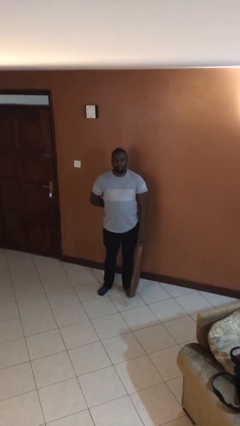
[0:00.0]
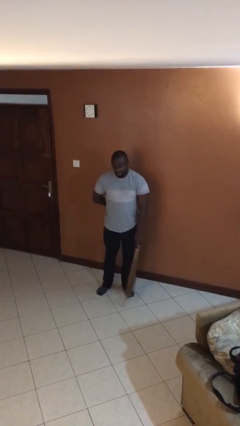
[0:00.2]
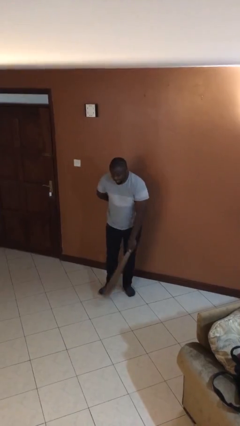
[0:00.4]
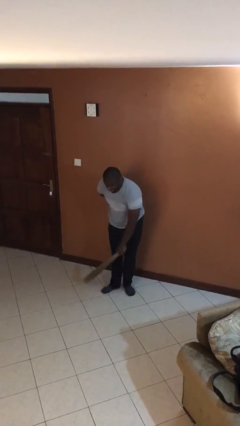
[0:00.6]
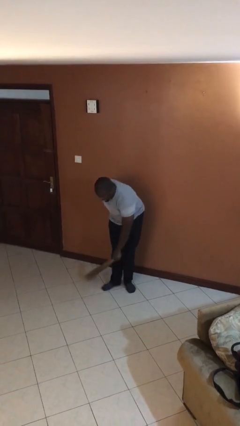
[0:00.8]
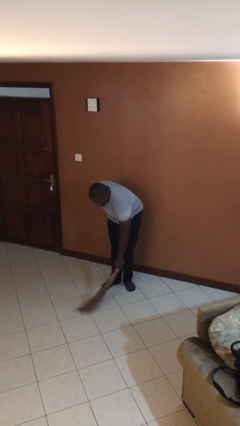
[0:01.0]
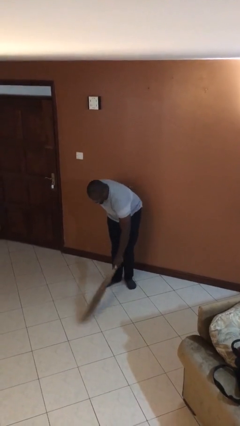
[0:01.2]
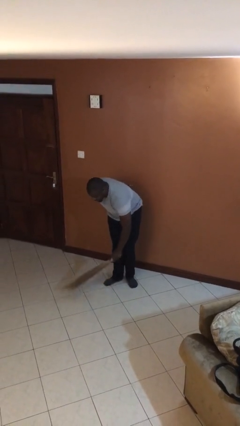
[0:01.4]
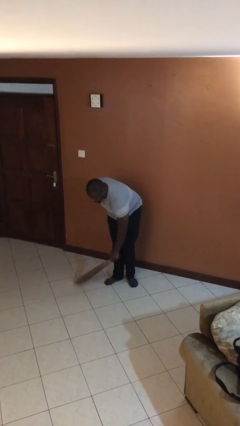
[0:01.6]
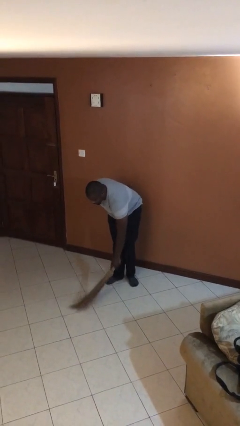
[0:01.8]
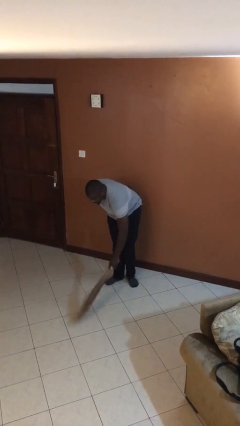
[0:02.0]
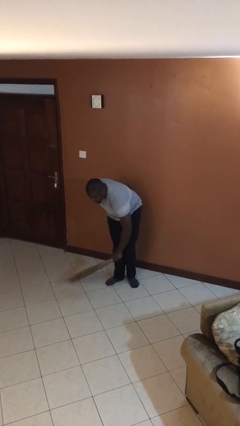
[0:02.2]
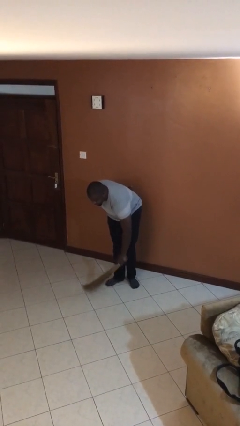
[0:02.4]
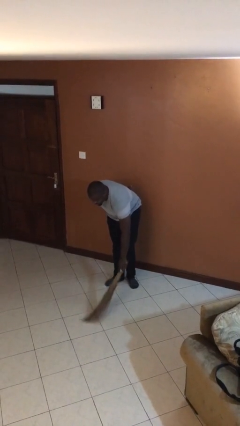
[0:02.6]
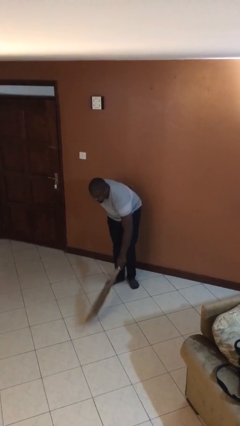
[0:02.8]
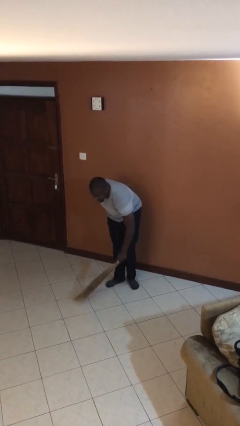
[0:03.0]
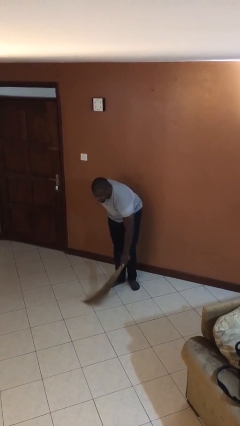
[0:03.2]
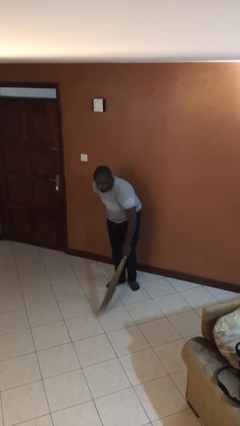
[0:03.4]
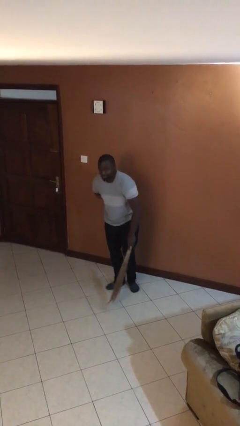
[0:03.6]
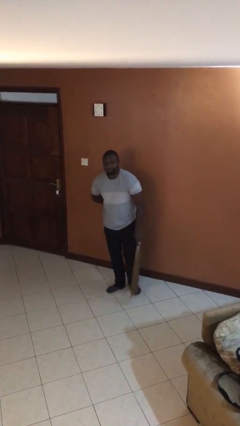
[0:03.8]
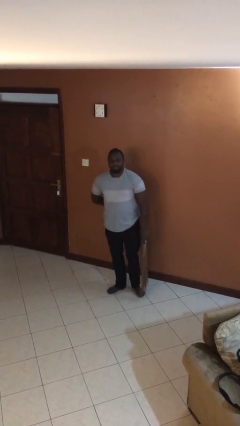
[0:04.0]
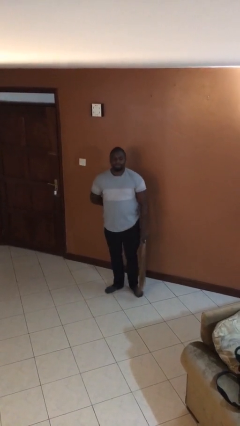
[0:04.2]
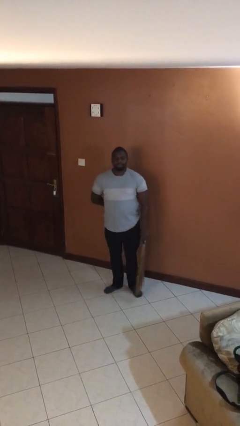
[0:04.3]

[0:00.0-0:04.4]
person sweeps floor

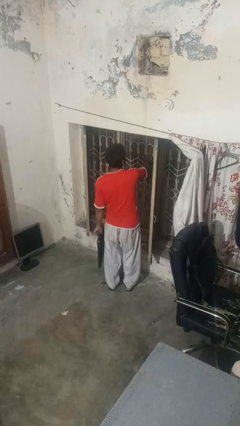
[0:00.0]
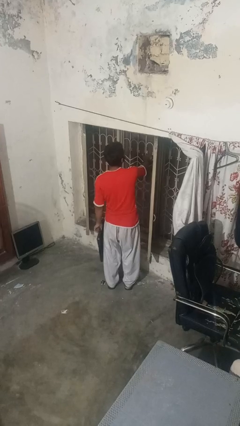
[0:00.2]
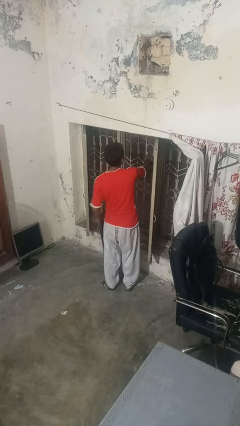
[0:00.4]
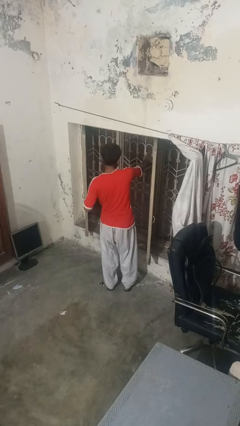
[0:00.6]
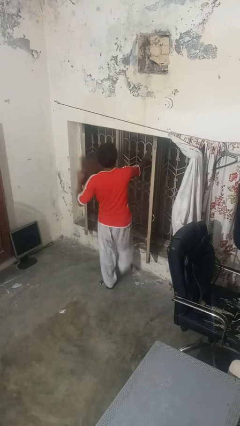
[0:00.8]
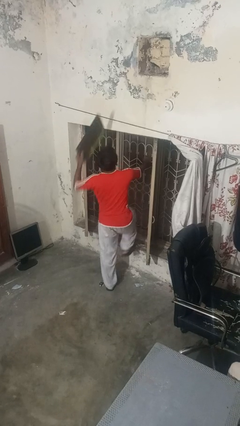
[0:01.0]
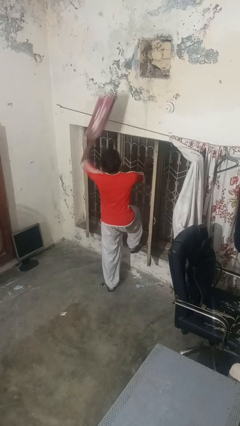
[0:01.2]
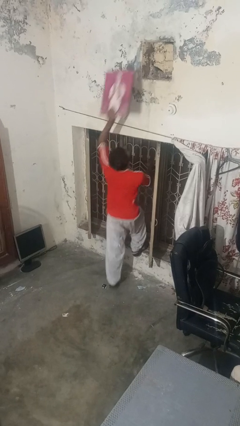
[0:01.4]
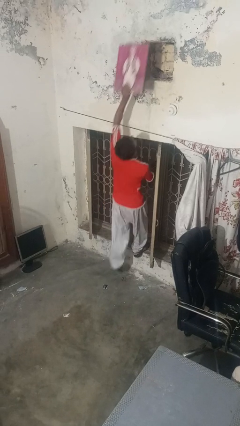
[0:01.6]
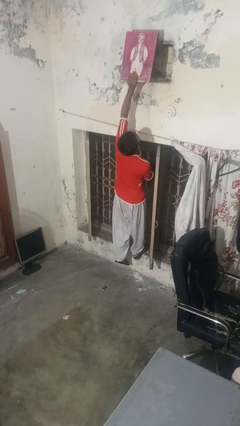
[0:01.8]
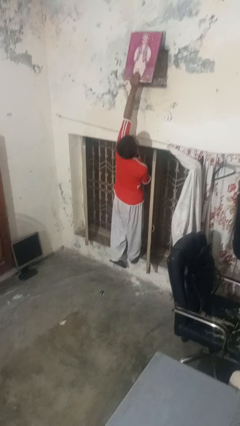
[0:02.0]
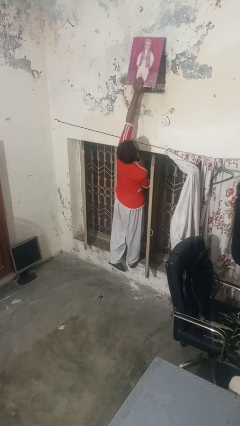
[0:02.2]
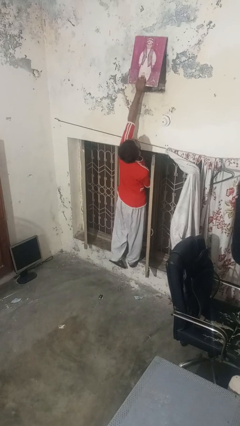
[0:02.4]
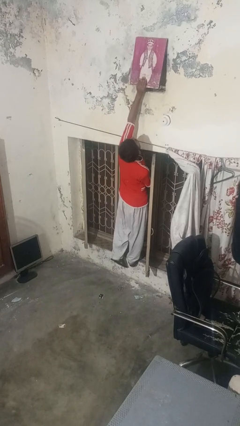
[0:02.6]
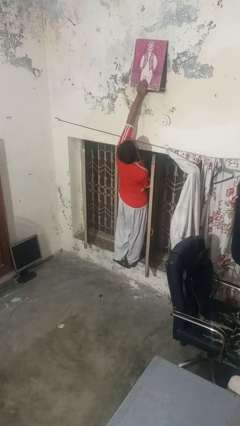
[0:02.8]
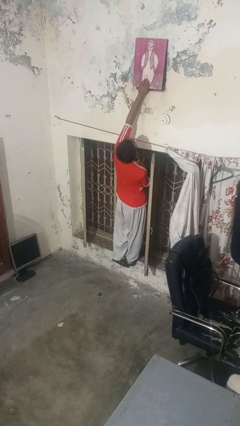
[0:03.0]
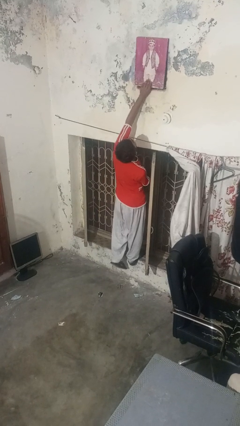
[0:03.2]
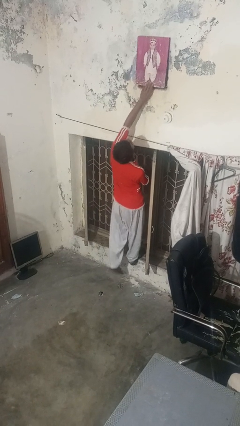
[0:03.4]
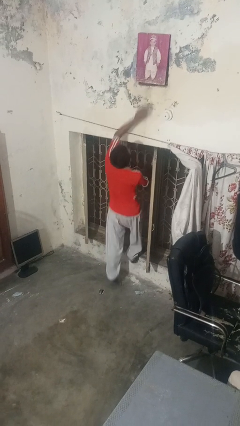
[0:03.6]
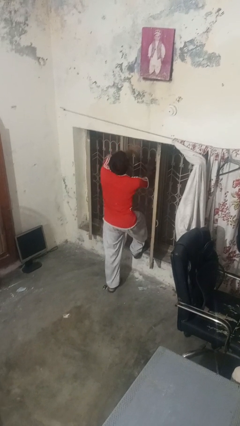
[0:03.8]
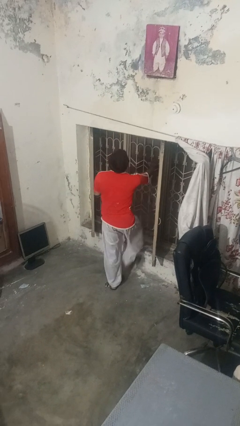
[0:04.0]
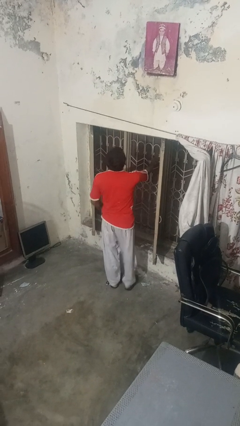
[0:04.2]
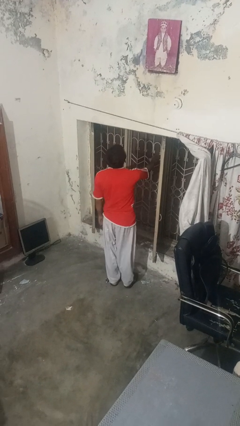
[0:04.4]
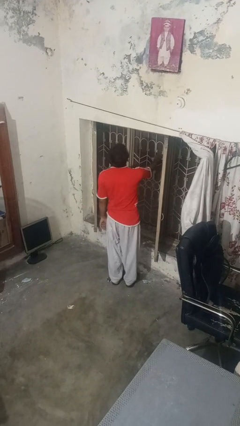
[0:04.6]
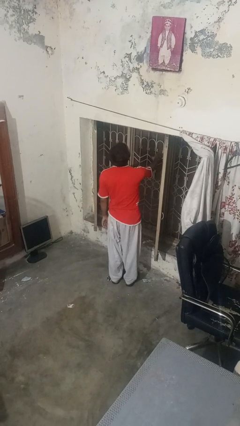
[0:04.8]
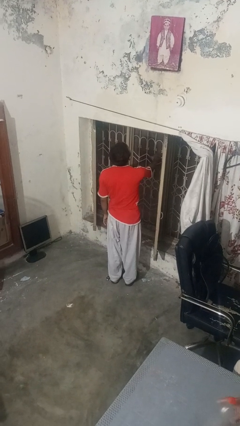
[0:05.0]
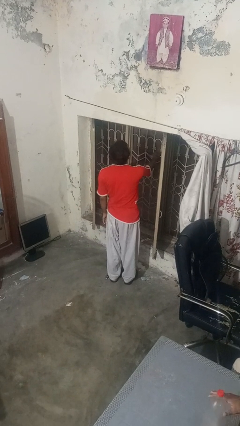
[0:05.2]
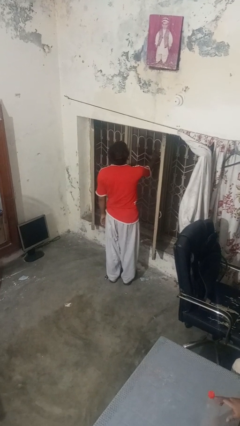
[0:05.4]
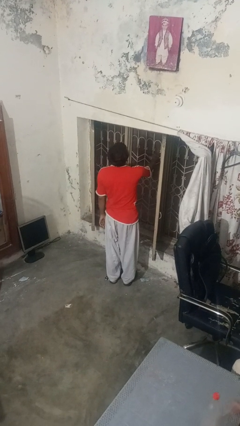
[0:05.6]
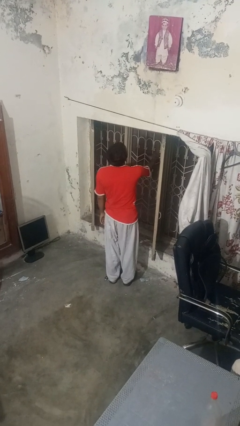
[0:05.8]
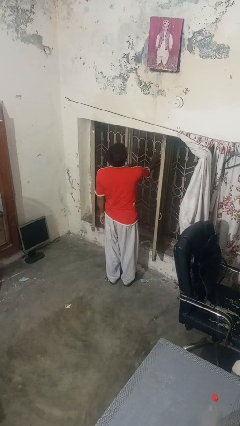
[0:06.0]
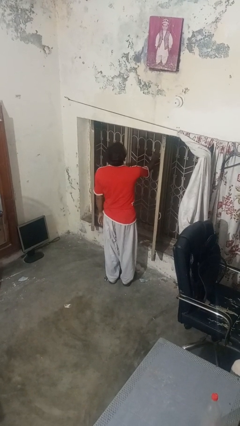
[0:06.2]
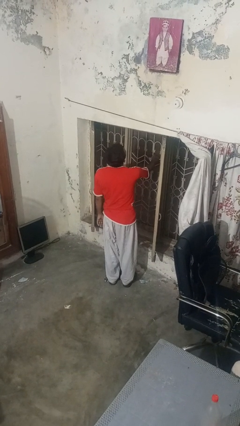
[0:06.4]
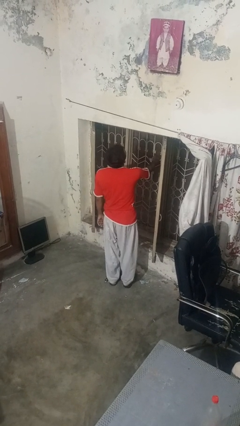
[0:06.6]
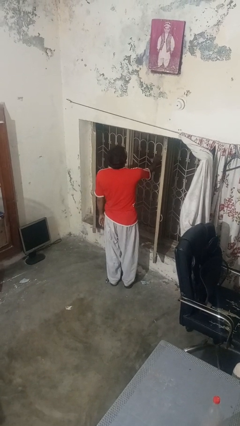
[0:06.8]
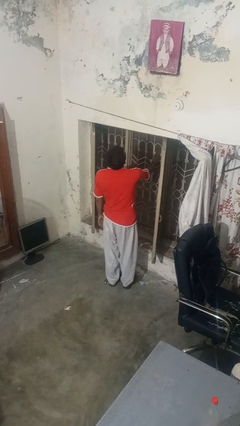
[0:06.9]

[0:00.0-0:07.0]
person puts up picture frame

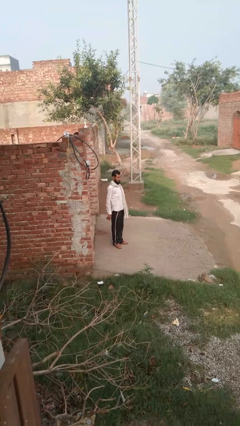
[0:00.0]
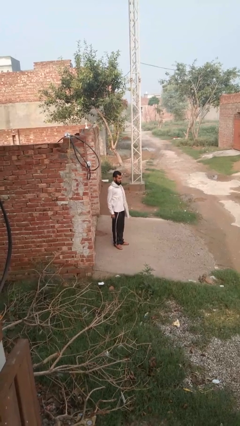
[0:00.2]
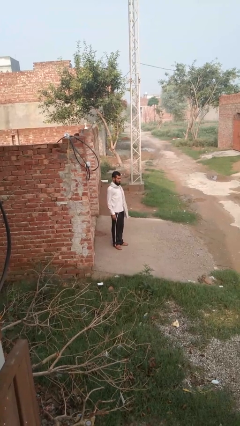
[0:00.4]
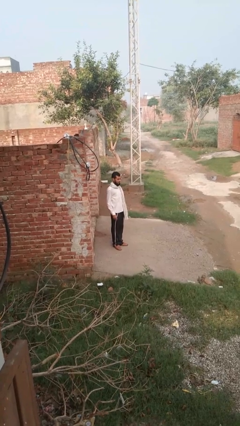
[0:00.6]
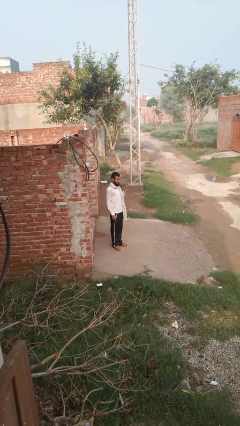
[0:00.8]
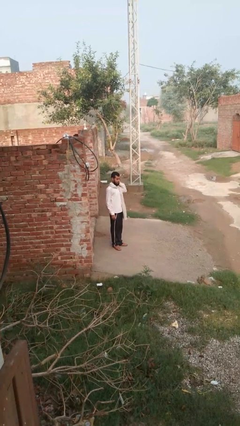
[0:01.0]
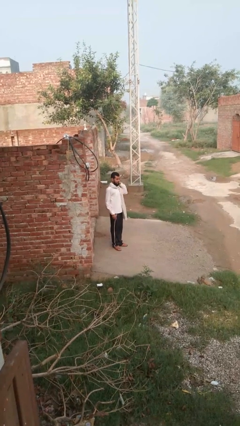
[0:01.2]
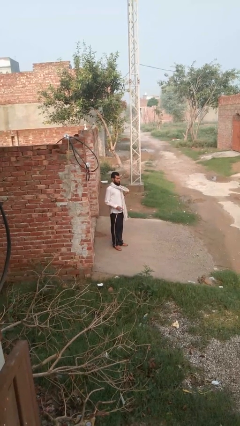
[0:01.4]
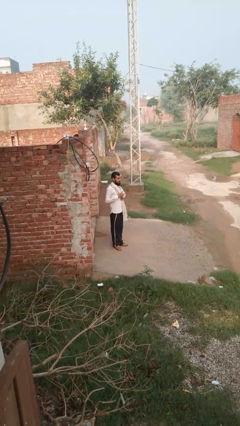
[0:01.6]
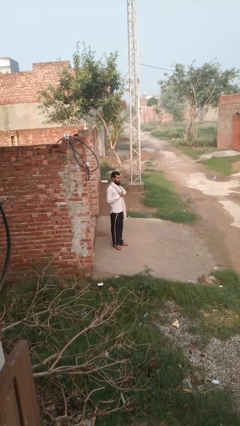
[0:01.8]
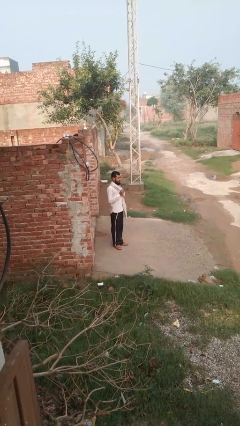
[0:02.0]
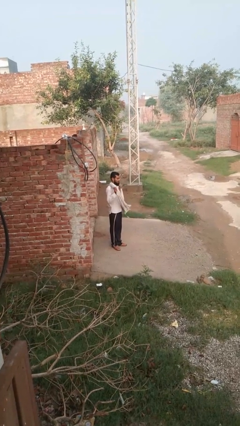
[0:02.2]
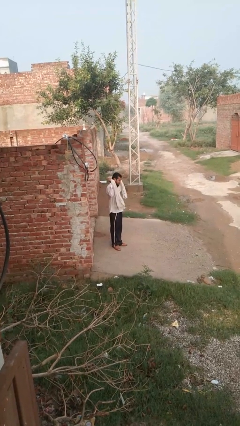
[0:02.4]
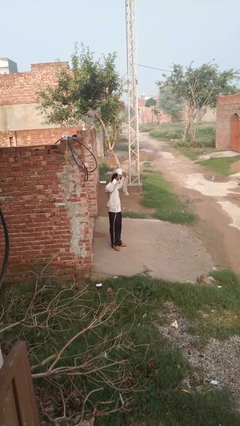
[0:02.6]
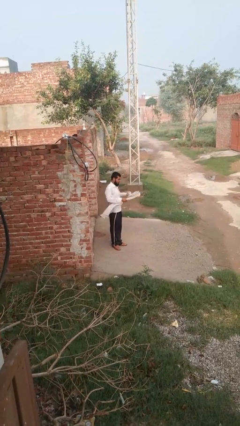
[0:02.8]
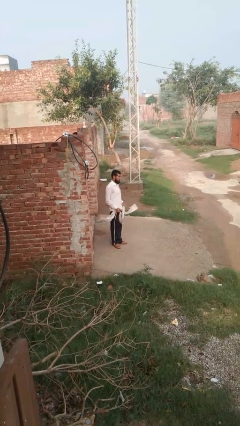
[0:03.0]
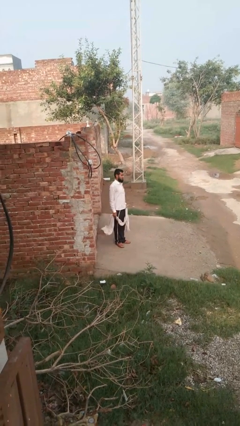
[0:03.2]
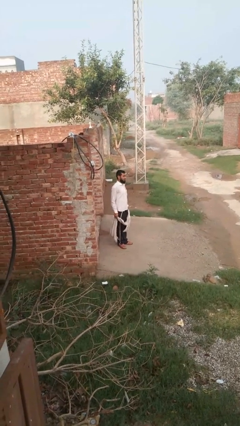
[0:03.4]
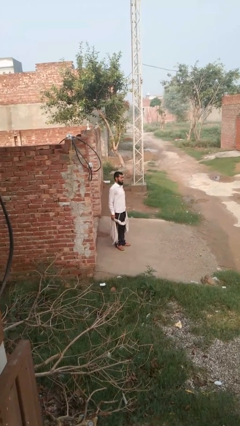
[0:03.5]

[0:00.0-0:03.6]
person takes off scarf

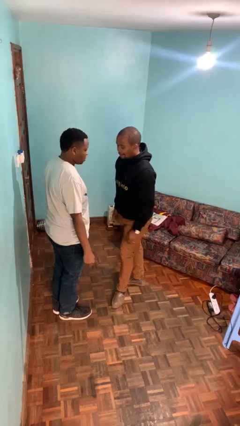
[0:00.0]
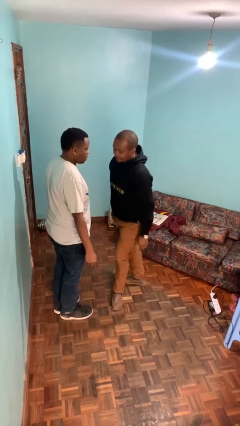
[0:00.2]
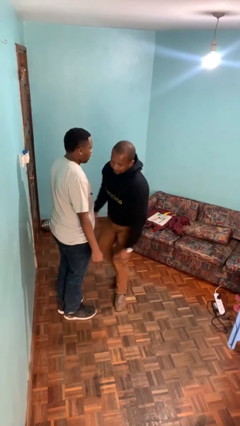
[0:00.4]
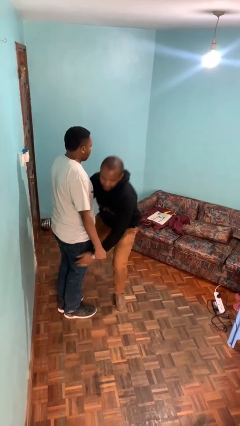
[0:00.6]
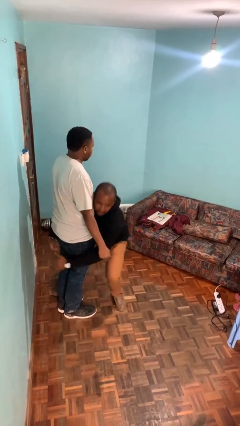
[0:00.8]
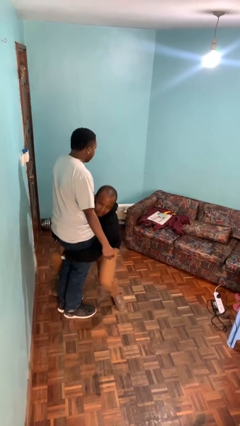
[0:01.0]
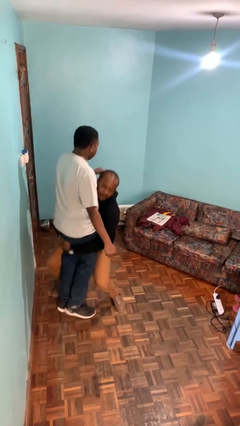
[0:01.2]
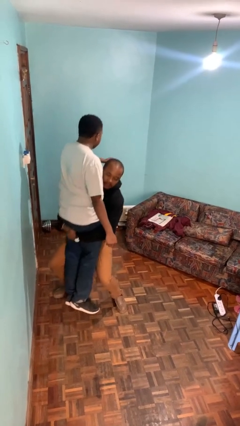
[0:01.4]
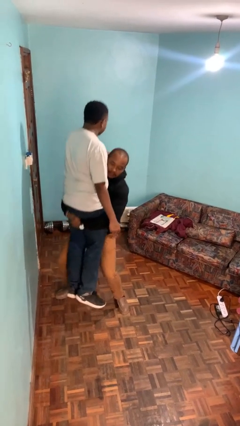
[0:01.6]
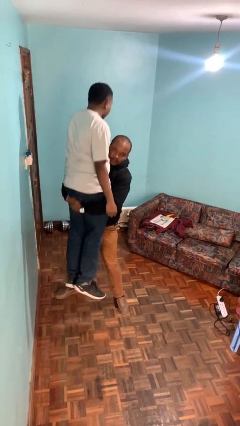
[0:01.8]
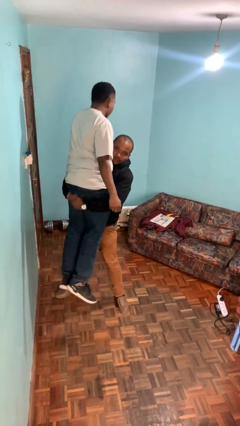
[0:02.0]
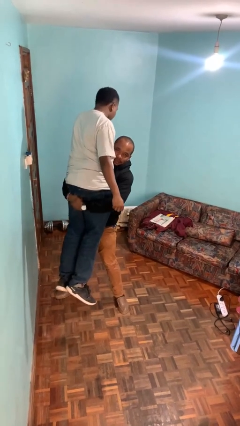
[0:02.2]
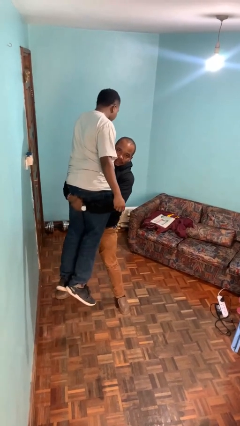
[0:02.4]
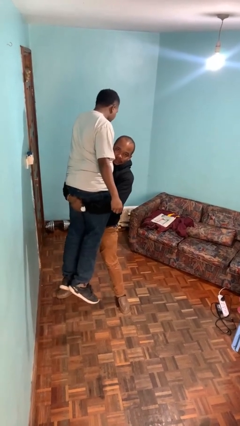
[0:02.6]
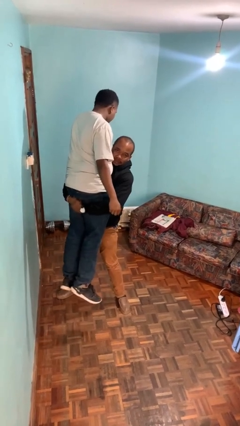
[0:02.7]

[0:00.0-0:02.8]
person picks up person
